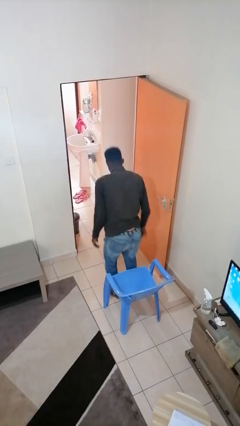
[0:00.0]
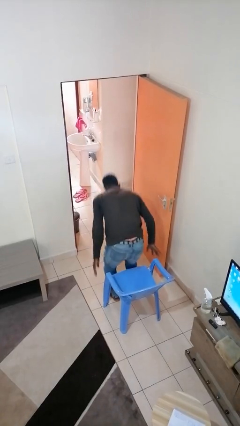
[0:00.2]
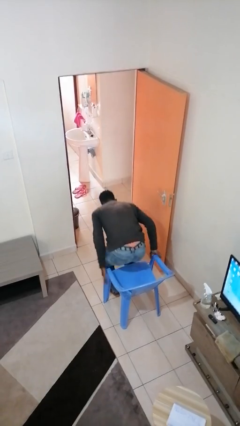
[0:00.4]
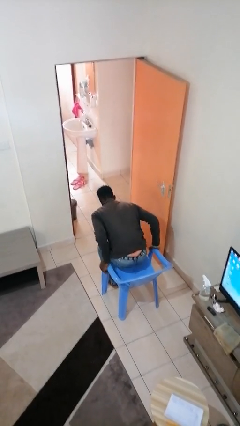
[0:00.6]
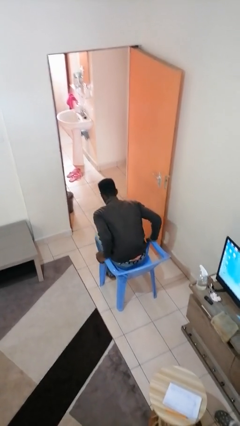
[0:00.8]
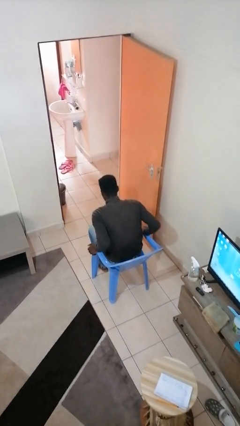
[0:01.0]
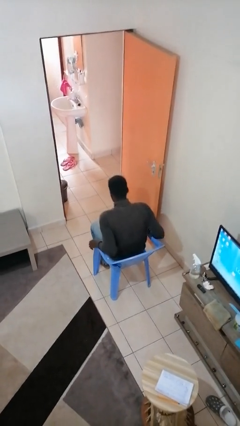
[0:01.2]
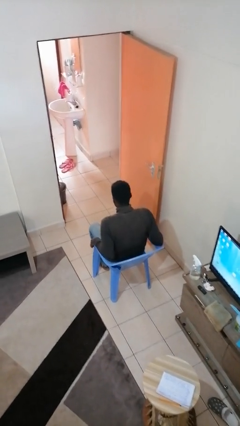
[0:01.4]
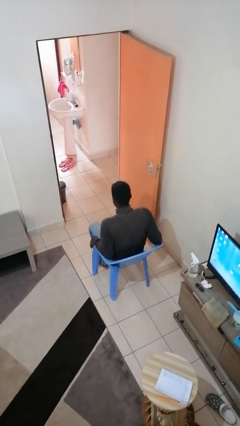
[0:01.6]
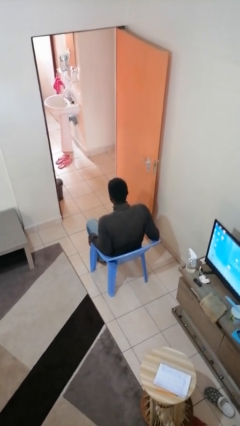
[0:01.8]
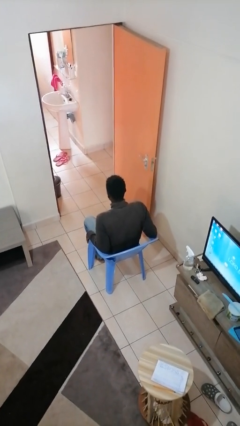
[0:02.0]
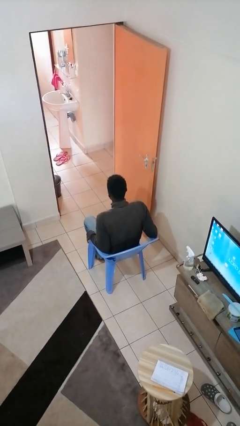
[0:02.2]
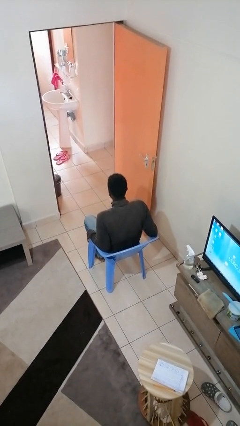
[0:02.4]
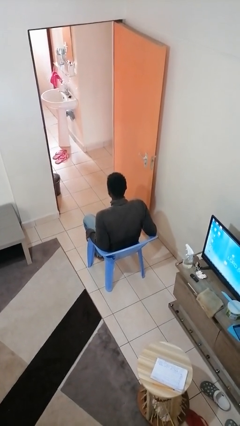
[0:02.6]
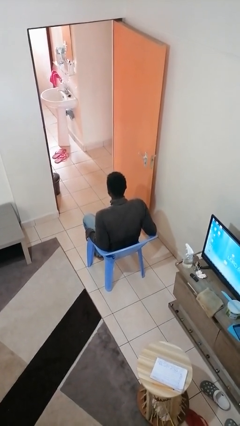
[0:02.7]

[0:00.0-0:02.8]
person sits down

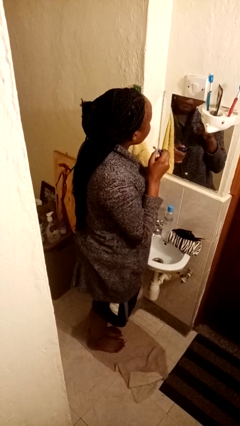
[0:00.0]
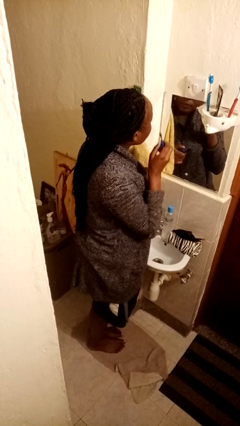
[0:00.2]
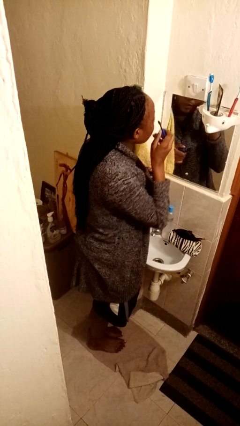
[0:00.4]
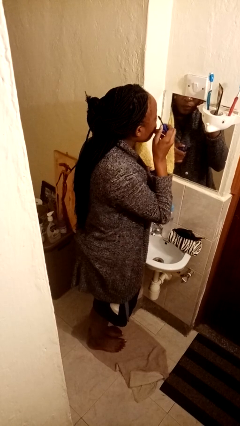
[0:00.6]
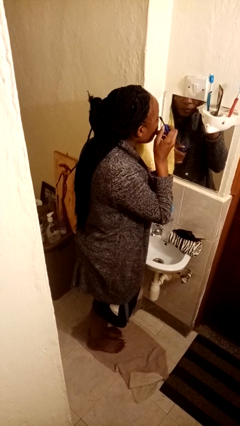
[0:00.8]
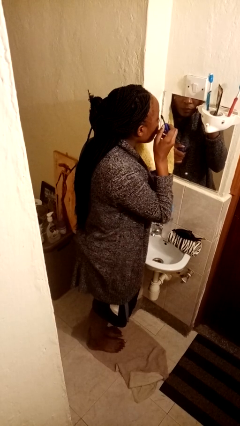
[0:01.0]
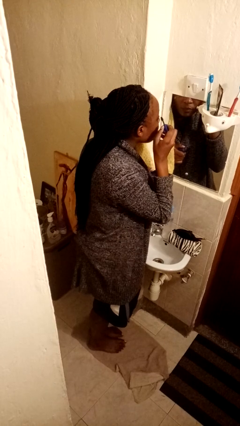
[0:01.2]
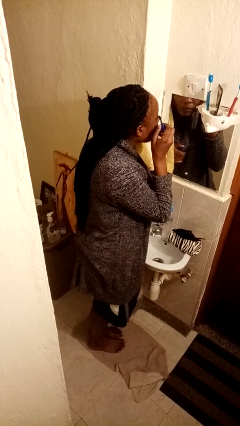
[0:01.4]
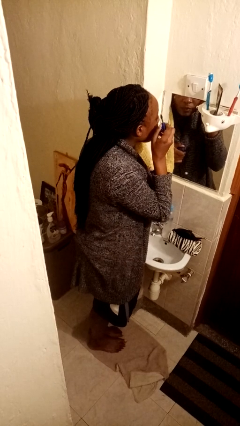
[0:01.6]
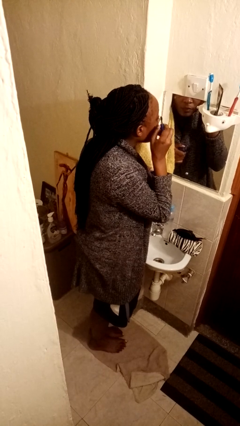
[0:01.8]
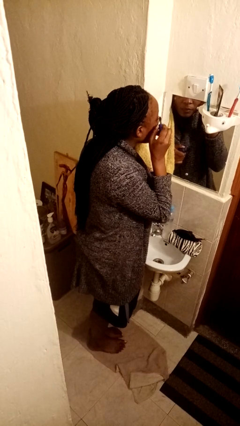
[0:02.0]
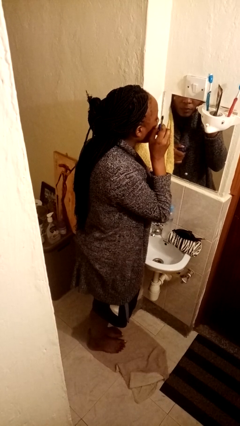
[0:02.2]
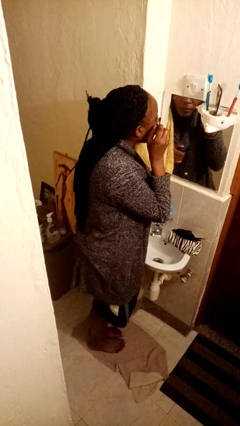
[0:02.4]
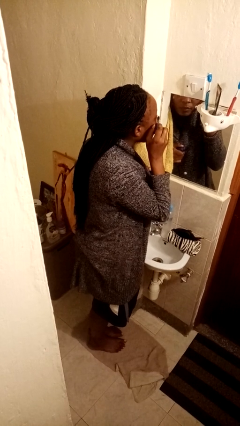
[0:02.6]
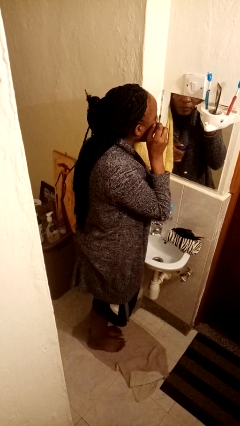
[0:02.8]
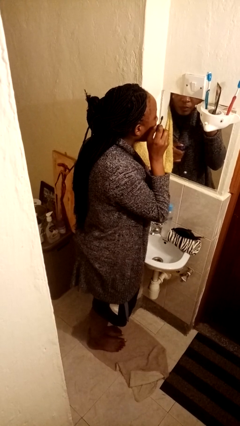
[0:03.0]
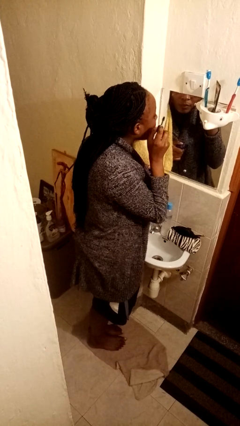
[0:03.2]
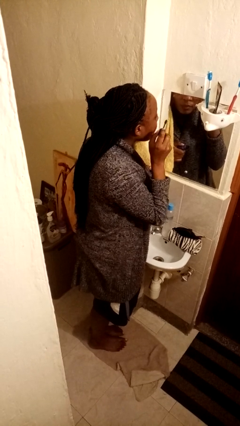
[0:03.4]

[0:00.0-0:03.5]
person applies eye makeup

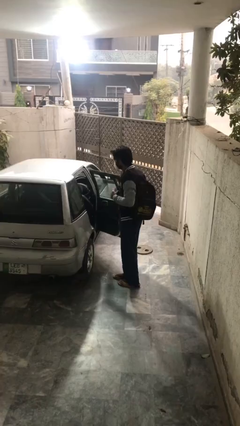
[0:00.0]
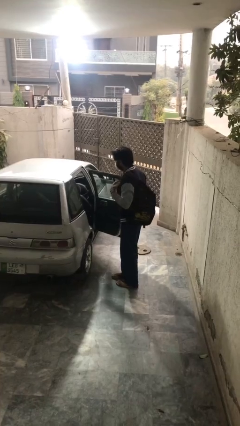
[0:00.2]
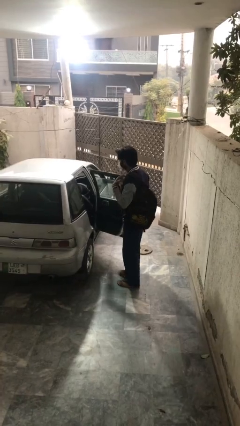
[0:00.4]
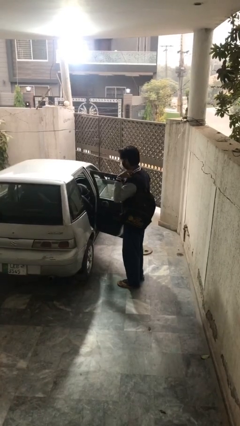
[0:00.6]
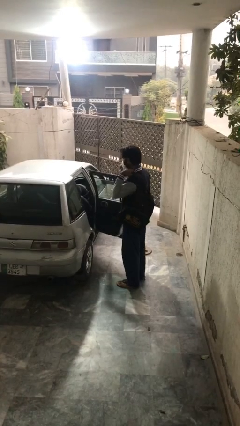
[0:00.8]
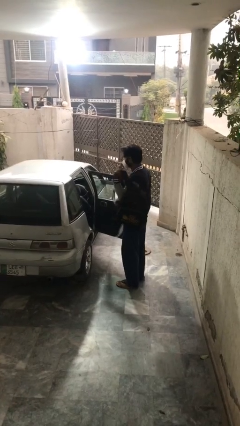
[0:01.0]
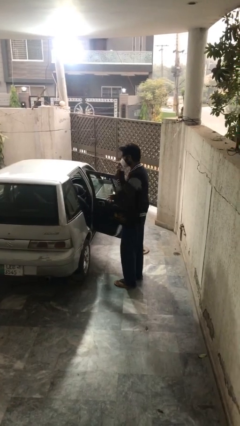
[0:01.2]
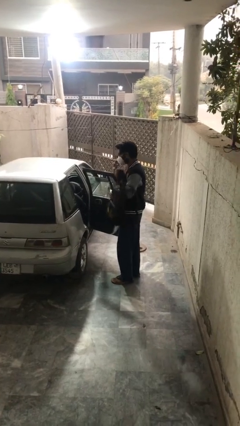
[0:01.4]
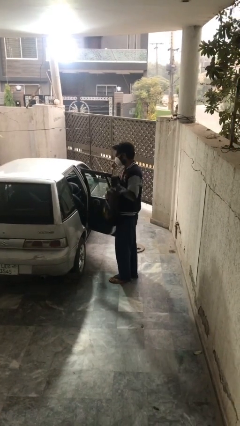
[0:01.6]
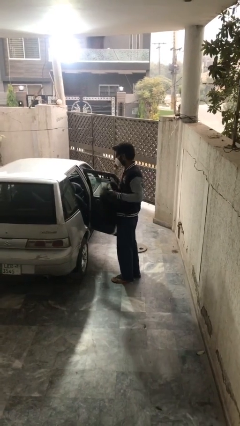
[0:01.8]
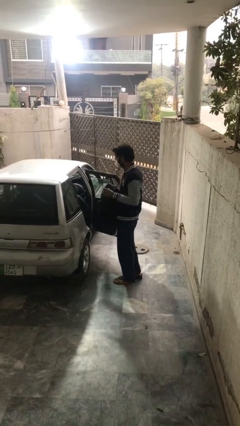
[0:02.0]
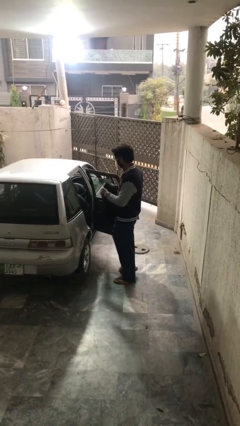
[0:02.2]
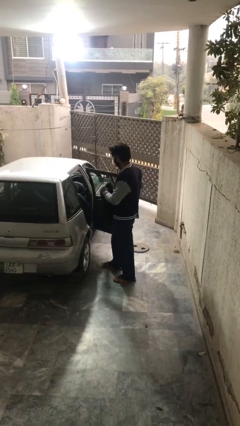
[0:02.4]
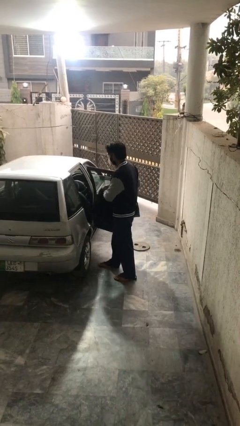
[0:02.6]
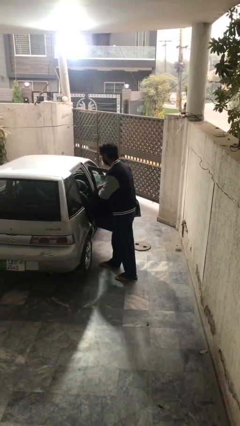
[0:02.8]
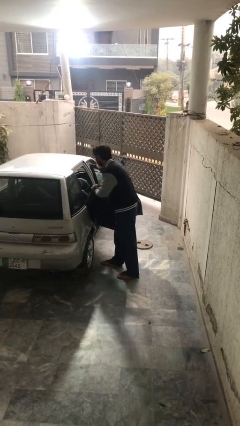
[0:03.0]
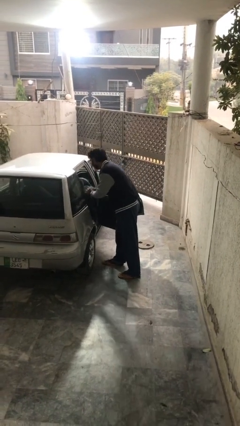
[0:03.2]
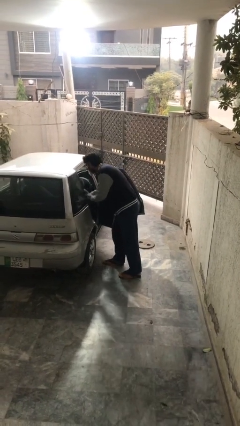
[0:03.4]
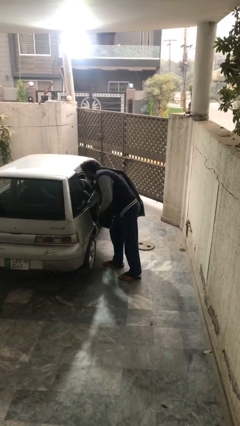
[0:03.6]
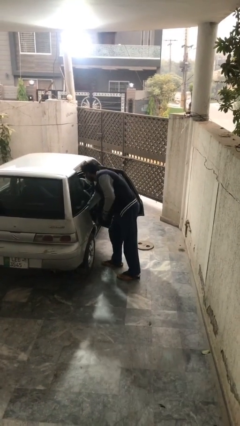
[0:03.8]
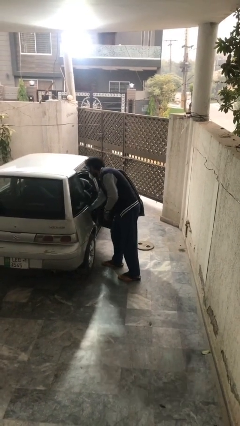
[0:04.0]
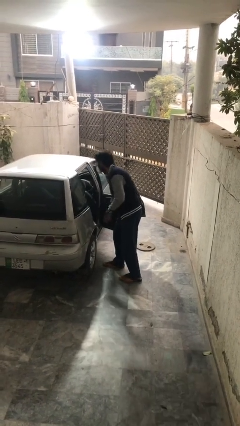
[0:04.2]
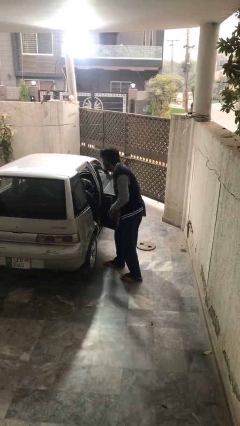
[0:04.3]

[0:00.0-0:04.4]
person loads car

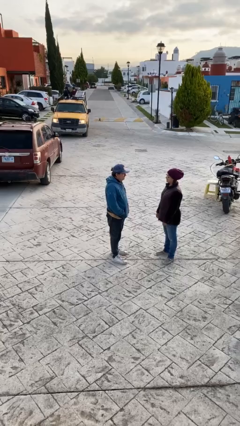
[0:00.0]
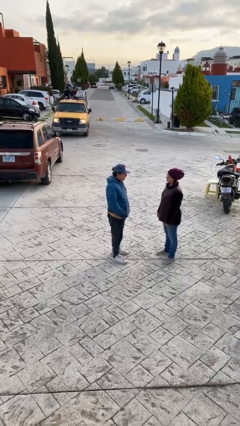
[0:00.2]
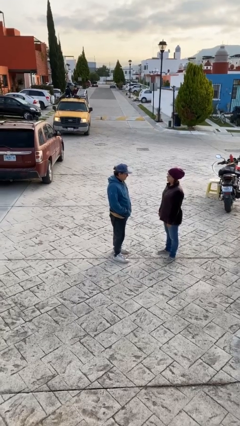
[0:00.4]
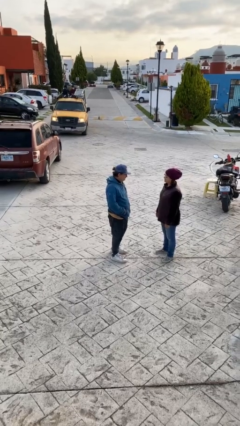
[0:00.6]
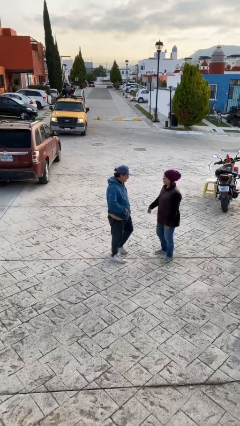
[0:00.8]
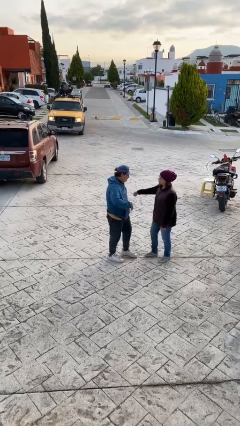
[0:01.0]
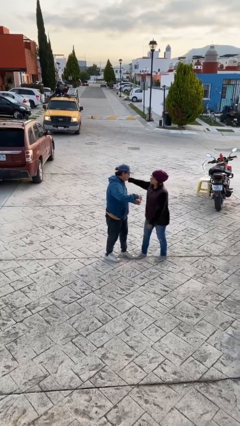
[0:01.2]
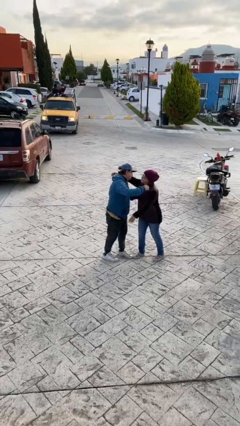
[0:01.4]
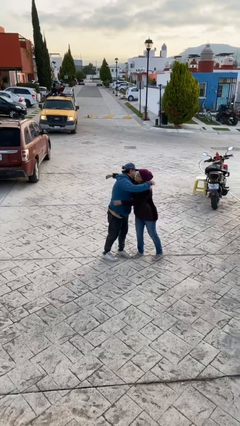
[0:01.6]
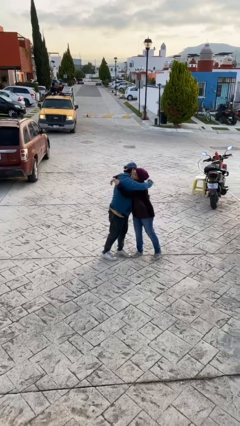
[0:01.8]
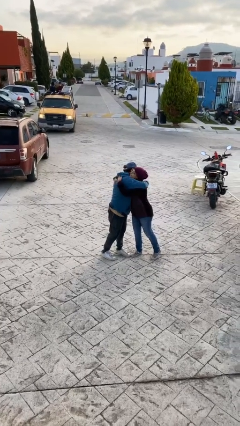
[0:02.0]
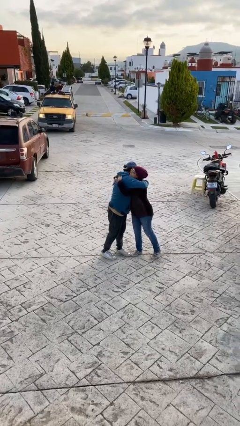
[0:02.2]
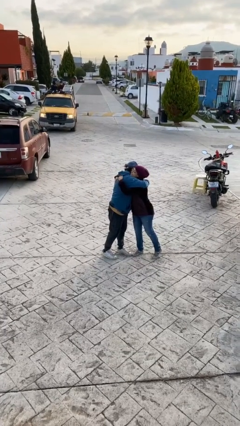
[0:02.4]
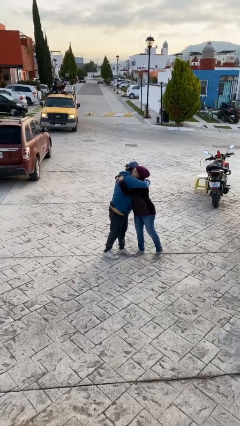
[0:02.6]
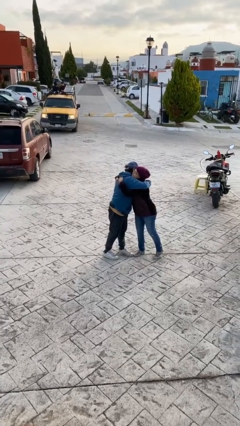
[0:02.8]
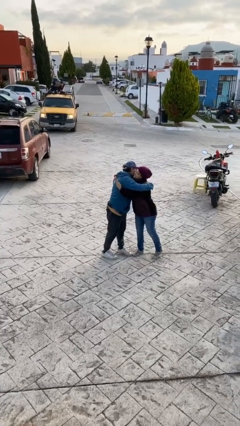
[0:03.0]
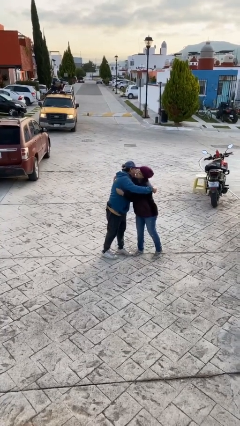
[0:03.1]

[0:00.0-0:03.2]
person embraces person

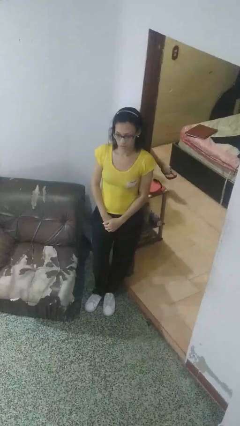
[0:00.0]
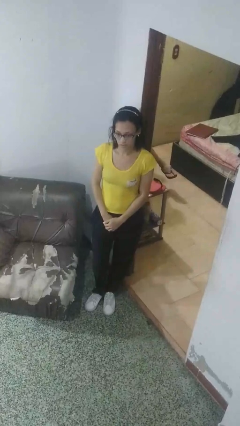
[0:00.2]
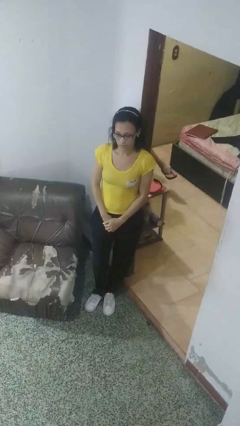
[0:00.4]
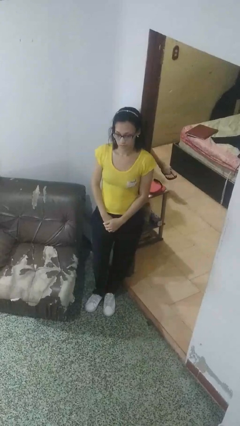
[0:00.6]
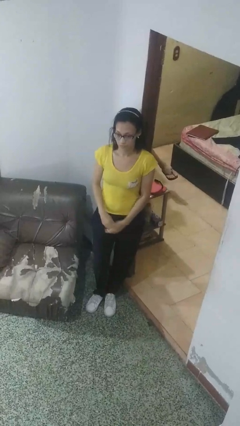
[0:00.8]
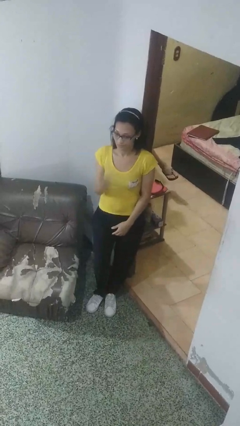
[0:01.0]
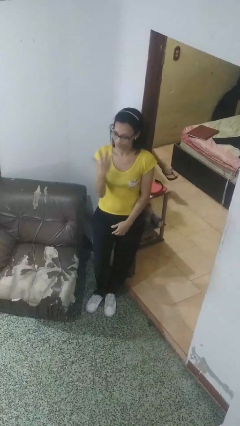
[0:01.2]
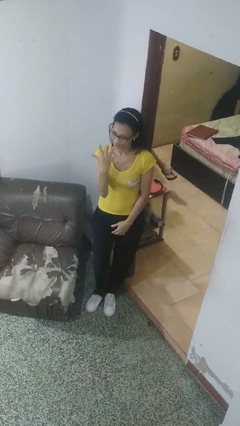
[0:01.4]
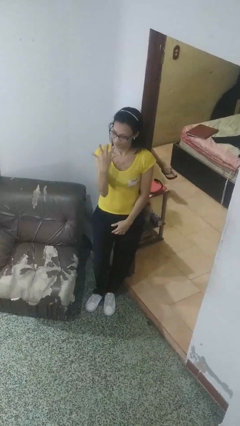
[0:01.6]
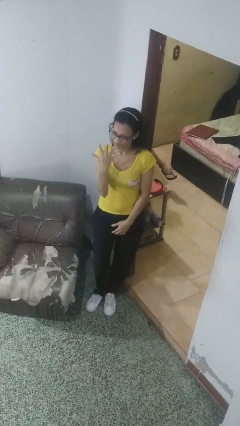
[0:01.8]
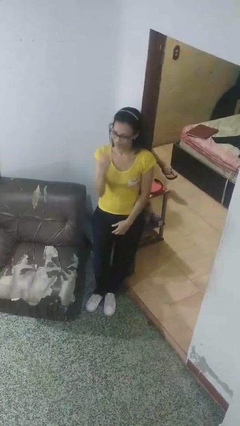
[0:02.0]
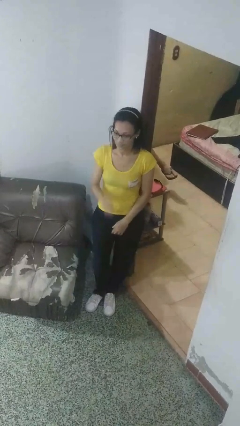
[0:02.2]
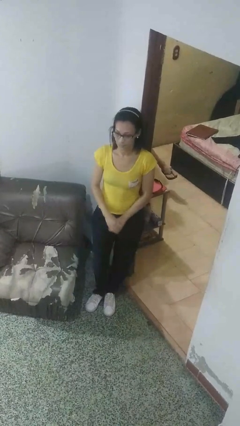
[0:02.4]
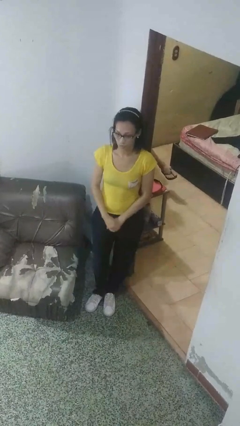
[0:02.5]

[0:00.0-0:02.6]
person gestures number five

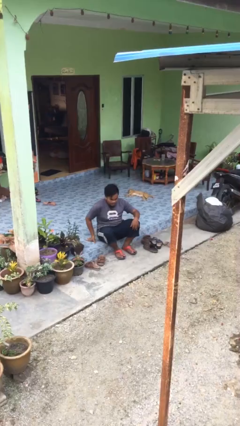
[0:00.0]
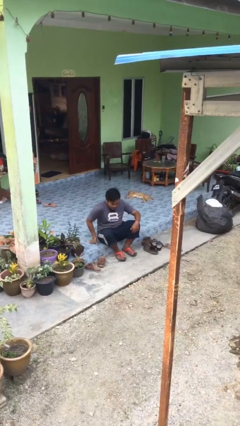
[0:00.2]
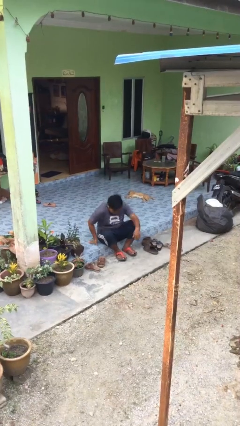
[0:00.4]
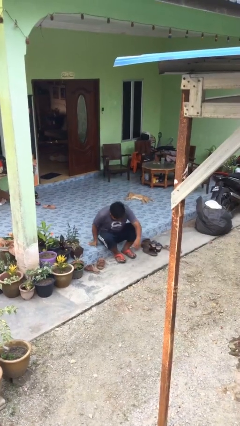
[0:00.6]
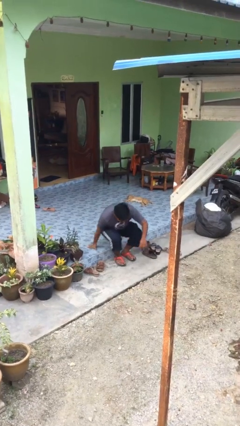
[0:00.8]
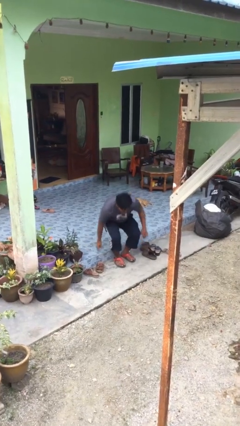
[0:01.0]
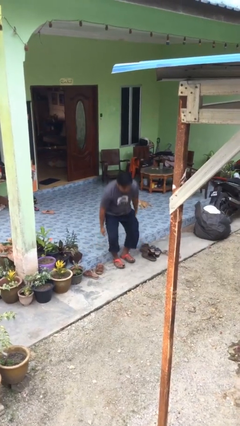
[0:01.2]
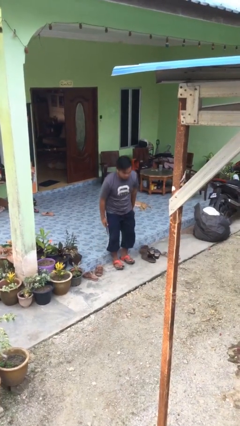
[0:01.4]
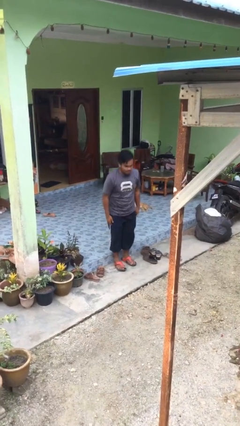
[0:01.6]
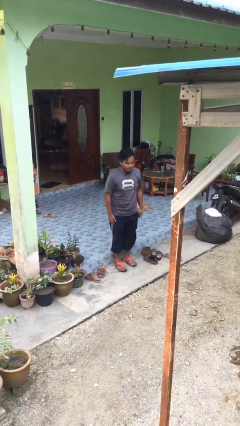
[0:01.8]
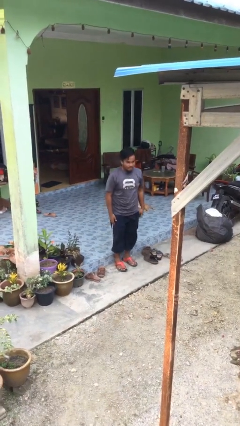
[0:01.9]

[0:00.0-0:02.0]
person stands up
